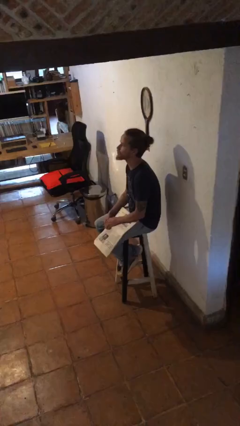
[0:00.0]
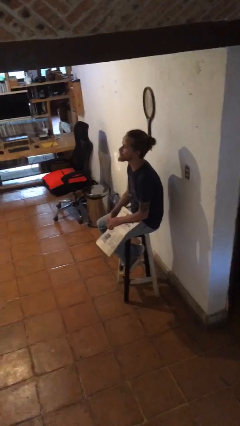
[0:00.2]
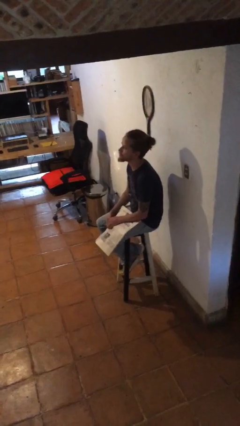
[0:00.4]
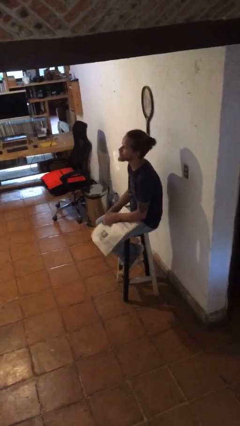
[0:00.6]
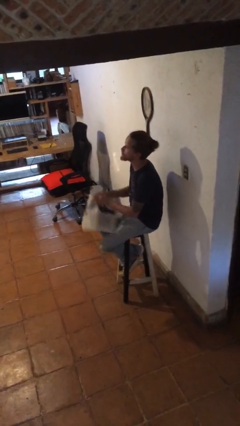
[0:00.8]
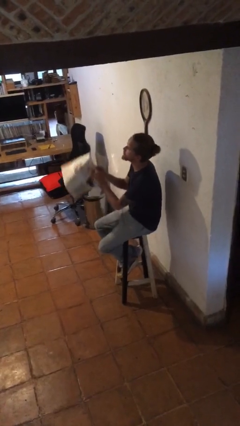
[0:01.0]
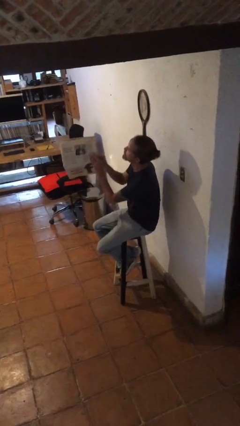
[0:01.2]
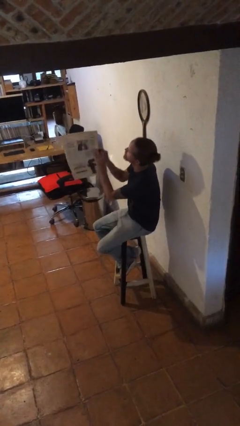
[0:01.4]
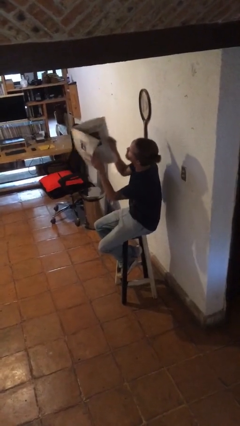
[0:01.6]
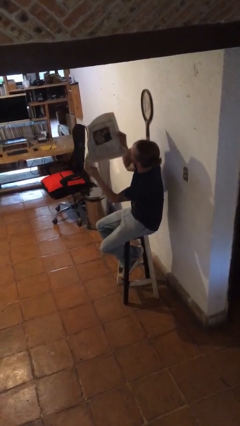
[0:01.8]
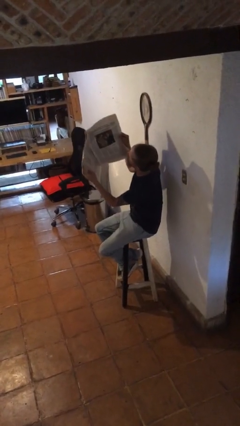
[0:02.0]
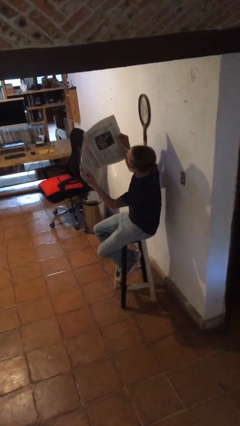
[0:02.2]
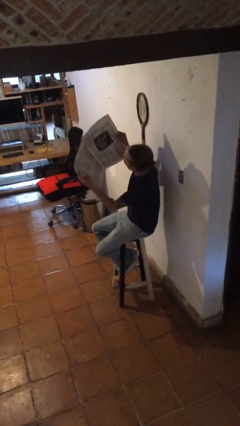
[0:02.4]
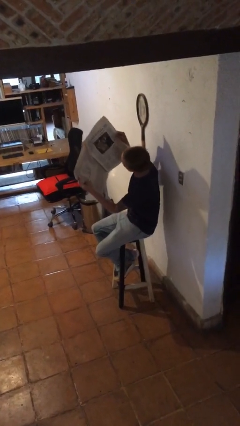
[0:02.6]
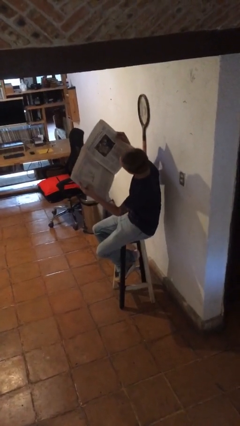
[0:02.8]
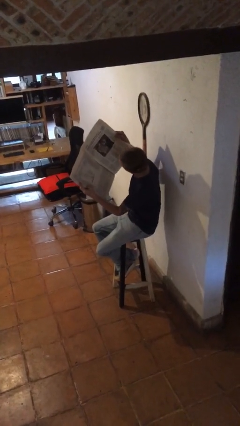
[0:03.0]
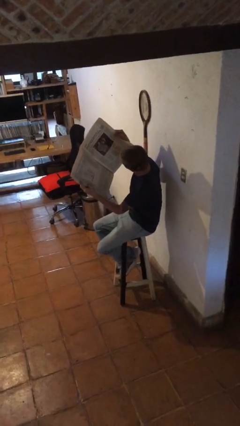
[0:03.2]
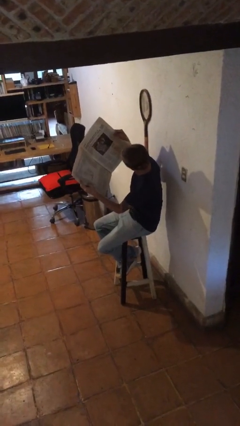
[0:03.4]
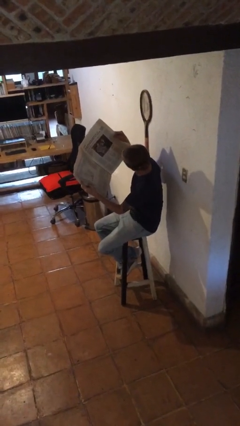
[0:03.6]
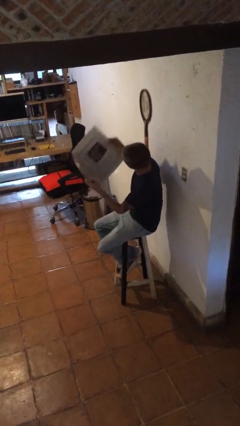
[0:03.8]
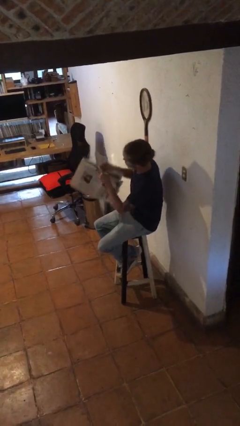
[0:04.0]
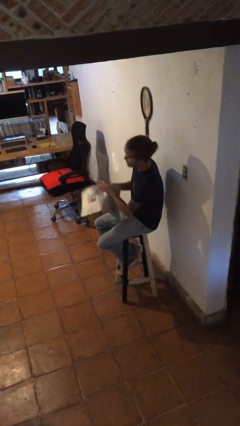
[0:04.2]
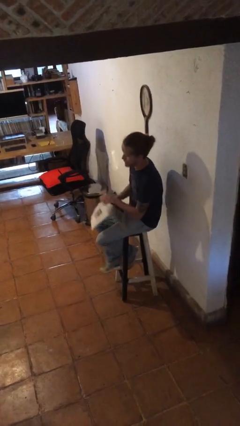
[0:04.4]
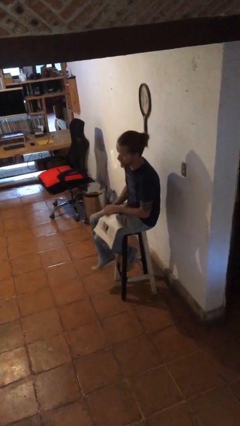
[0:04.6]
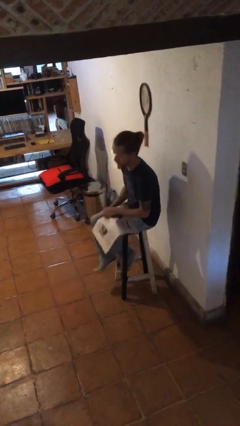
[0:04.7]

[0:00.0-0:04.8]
person reads newspaper

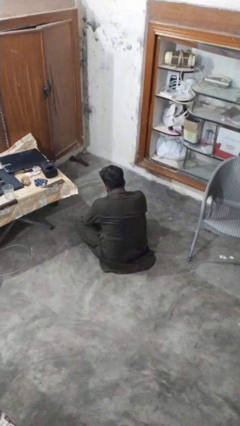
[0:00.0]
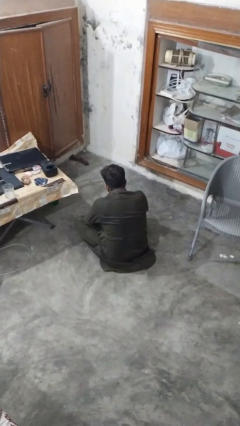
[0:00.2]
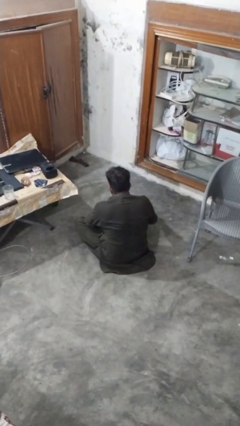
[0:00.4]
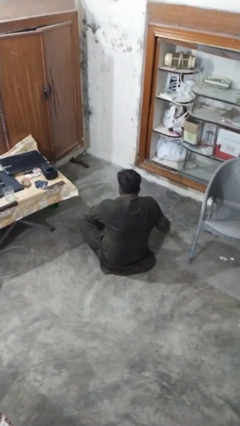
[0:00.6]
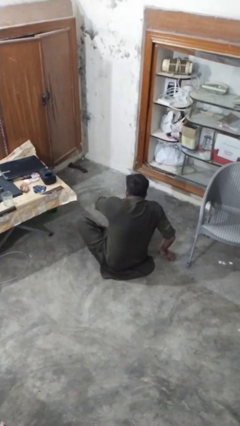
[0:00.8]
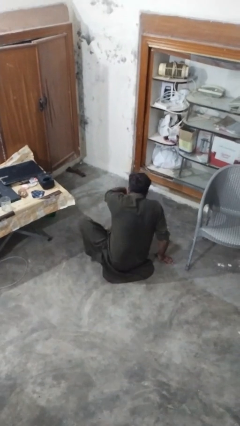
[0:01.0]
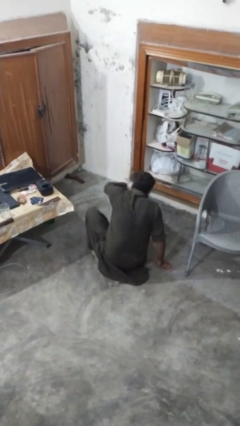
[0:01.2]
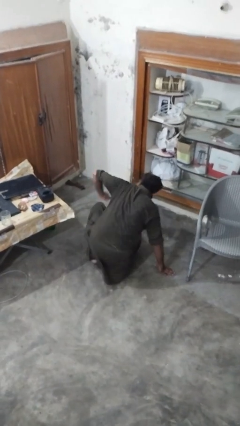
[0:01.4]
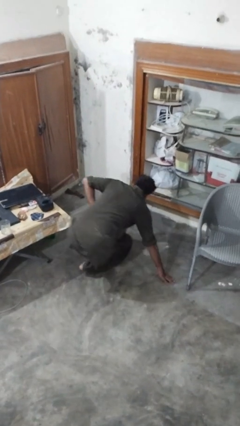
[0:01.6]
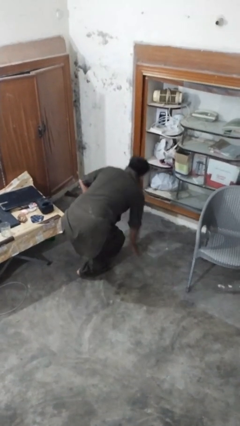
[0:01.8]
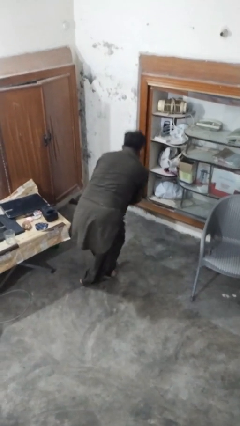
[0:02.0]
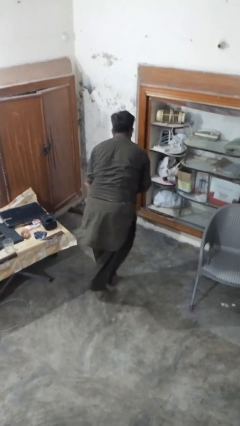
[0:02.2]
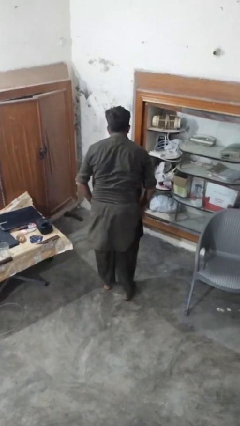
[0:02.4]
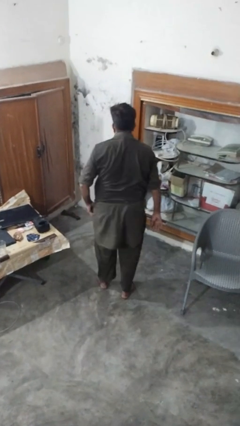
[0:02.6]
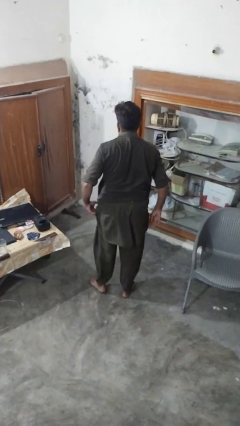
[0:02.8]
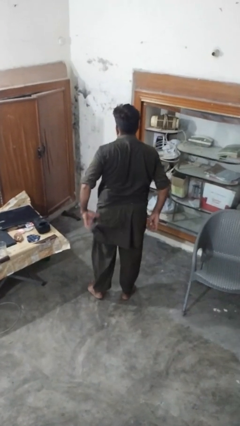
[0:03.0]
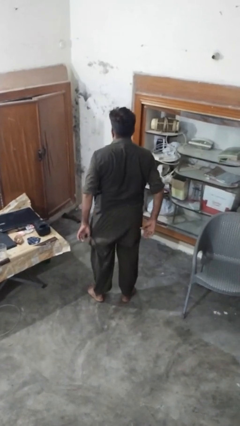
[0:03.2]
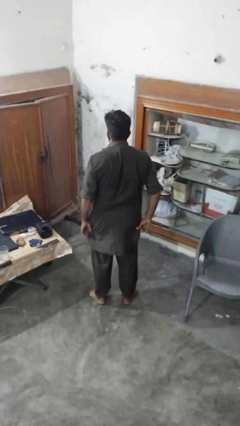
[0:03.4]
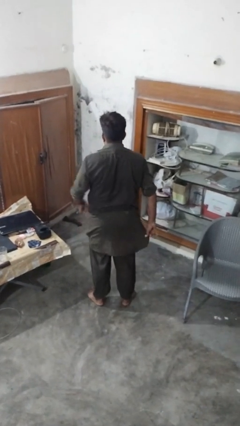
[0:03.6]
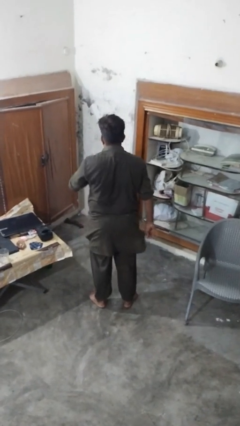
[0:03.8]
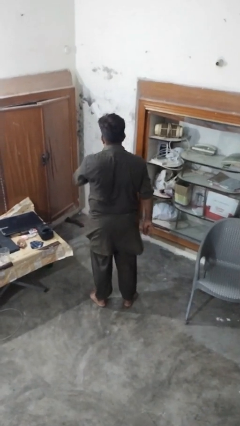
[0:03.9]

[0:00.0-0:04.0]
person stands up from floor

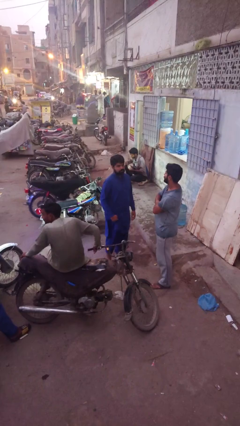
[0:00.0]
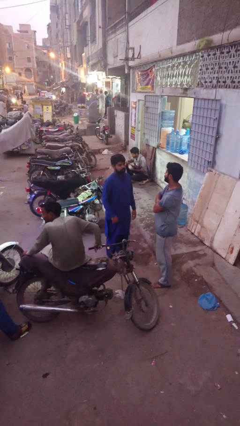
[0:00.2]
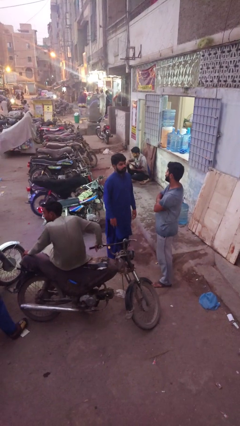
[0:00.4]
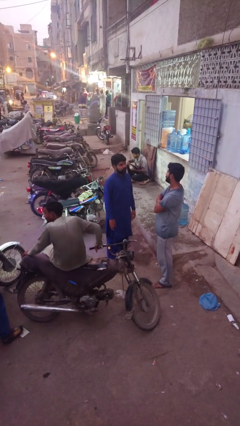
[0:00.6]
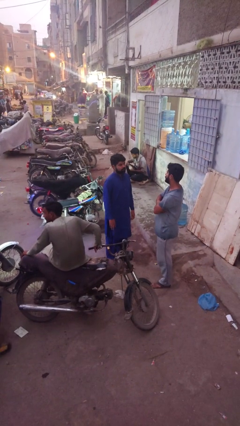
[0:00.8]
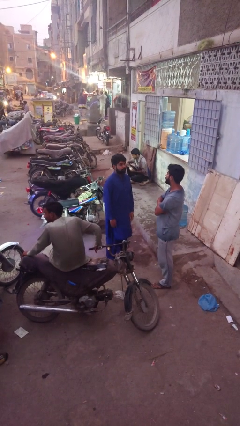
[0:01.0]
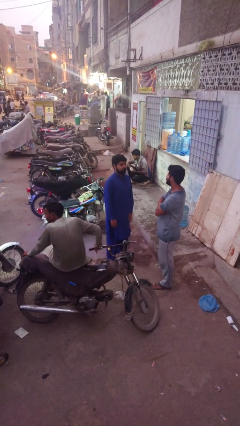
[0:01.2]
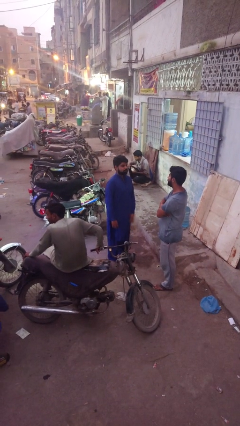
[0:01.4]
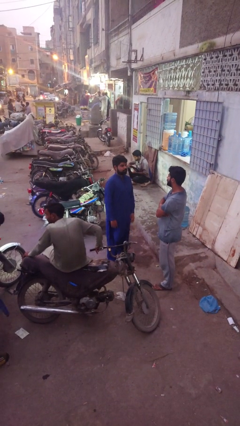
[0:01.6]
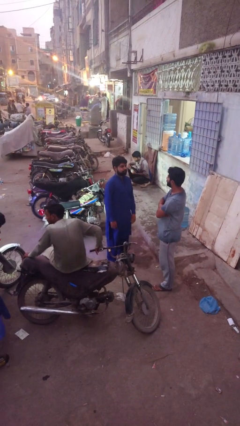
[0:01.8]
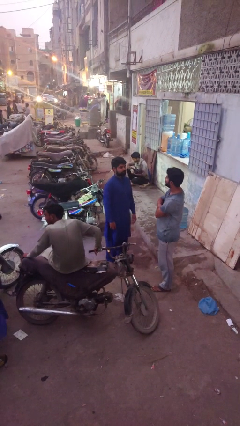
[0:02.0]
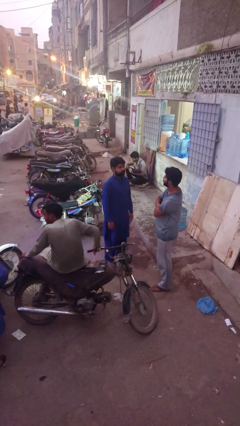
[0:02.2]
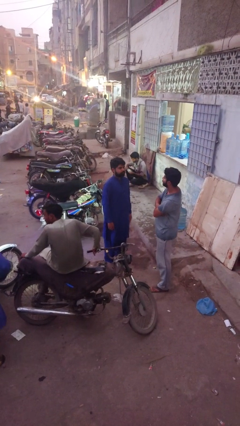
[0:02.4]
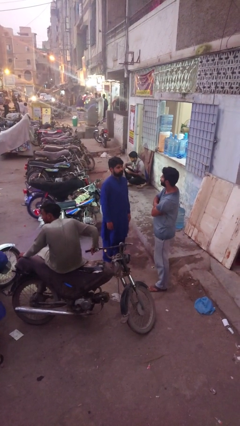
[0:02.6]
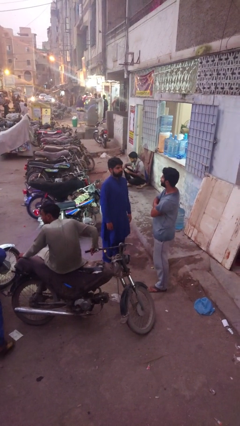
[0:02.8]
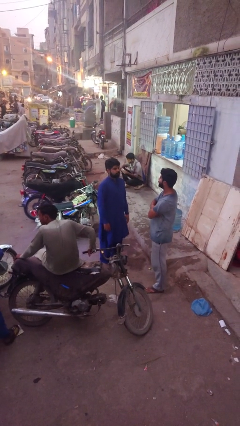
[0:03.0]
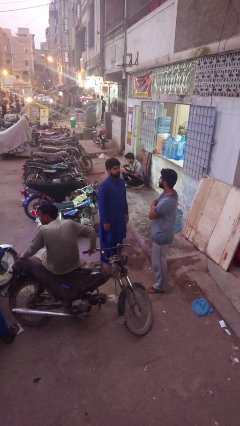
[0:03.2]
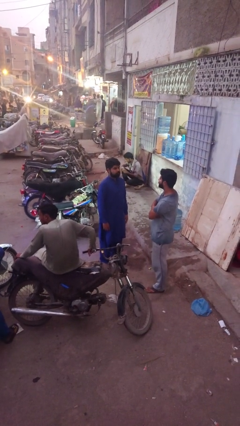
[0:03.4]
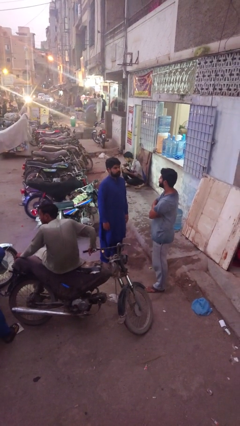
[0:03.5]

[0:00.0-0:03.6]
person talks to person

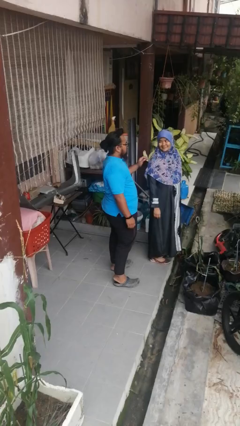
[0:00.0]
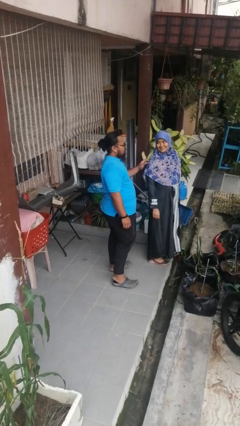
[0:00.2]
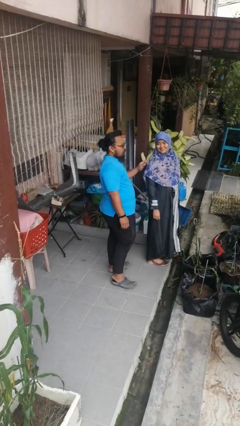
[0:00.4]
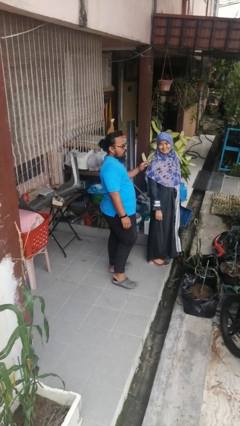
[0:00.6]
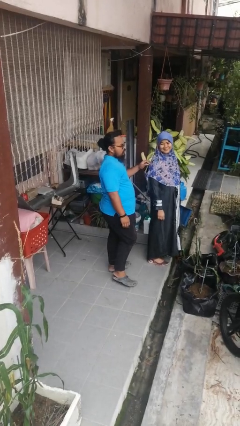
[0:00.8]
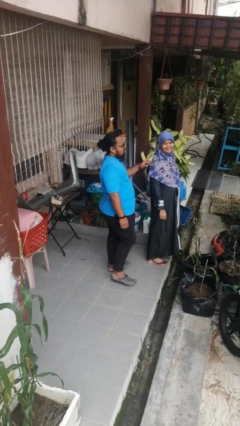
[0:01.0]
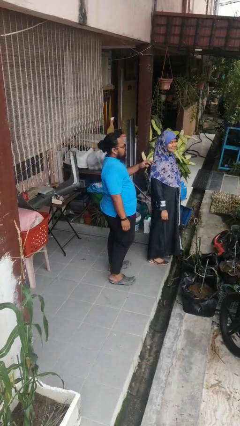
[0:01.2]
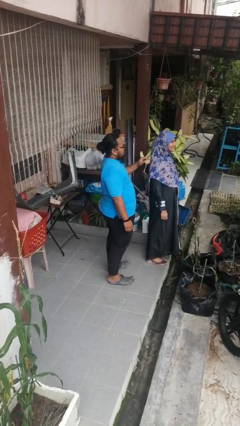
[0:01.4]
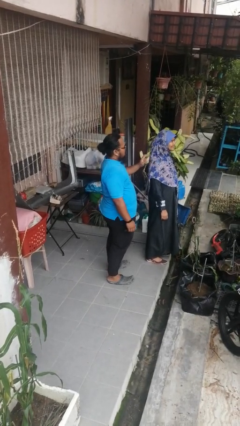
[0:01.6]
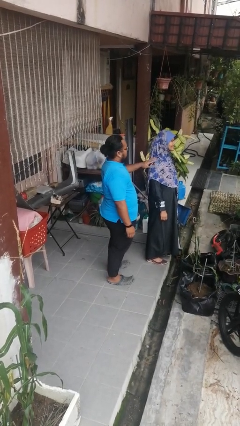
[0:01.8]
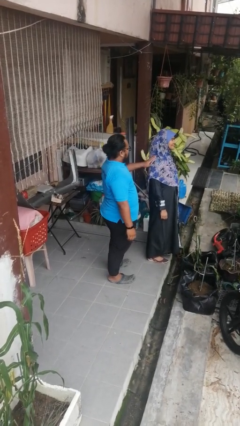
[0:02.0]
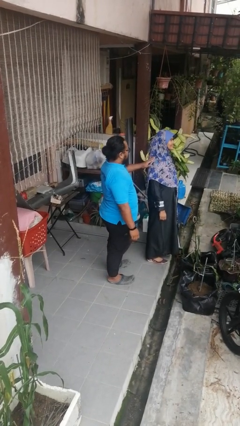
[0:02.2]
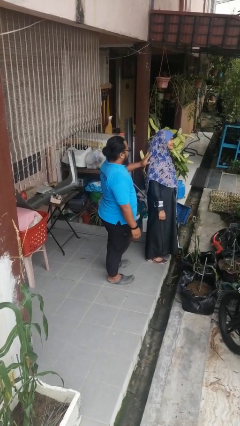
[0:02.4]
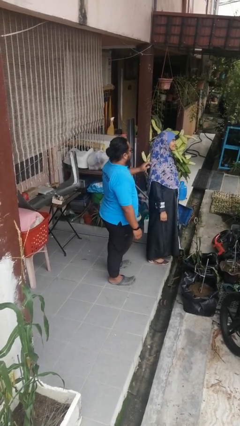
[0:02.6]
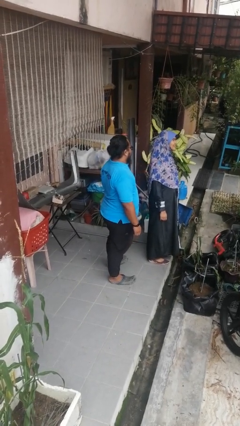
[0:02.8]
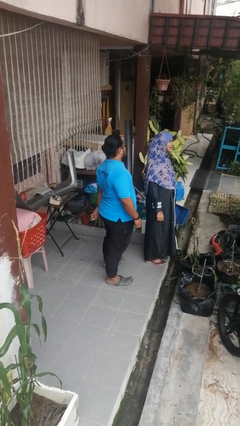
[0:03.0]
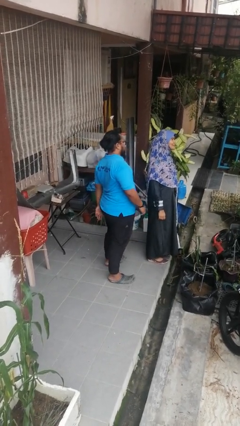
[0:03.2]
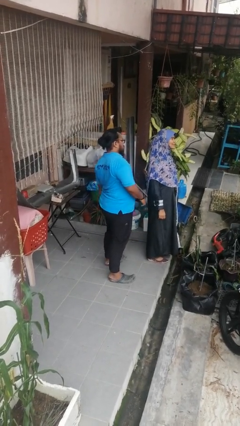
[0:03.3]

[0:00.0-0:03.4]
person touches back of person

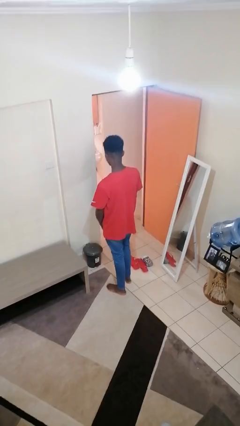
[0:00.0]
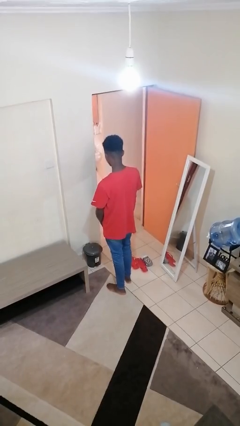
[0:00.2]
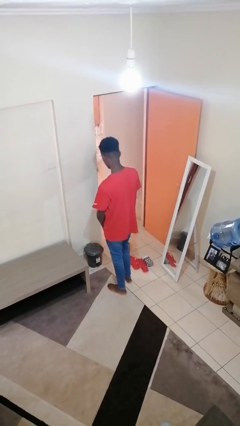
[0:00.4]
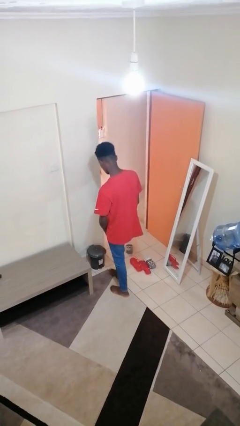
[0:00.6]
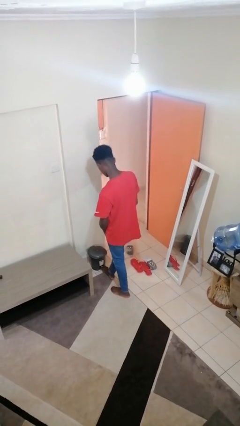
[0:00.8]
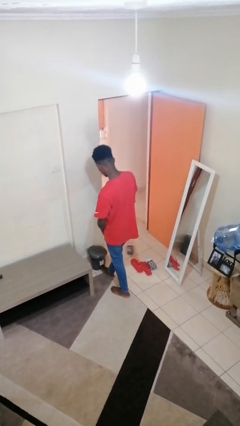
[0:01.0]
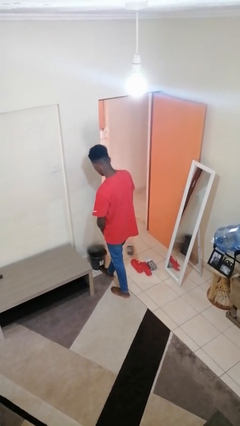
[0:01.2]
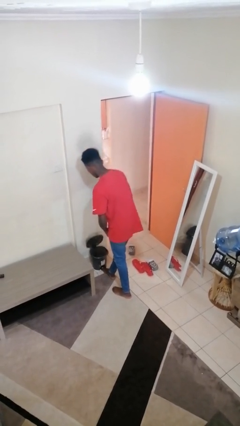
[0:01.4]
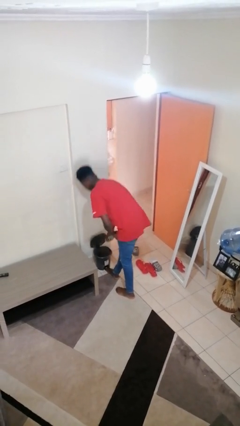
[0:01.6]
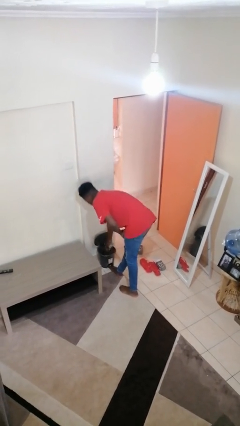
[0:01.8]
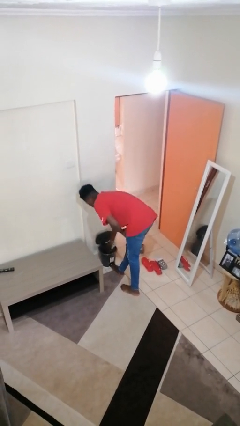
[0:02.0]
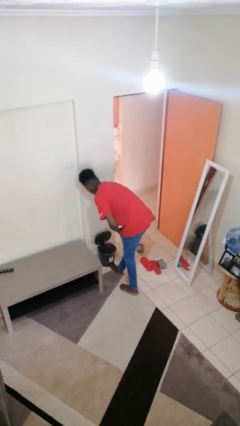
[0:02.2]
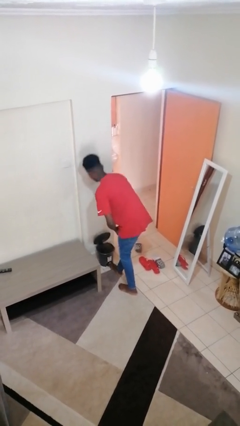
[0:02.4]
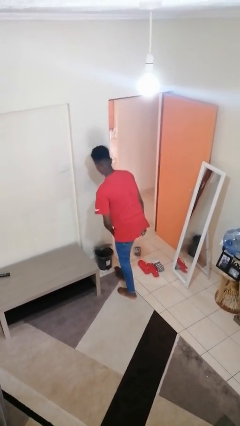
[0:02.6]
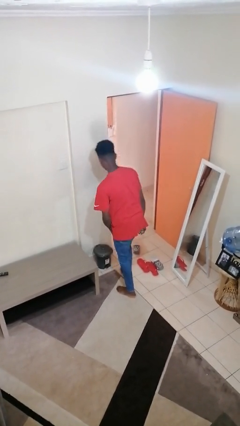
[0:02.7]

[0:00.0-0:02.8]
person discards trash
